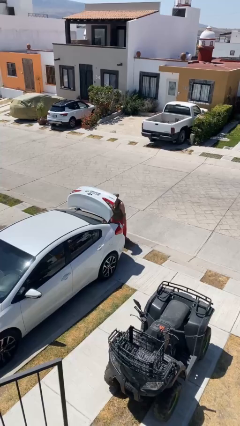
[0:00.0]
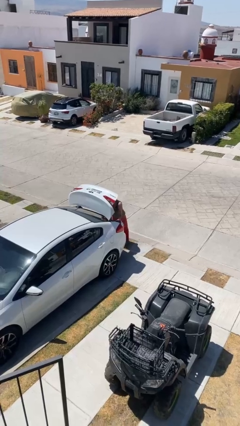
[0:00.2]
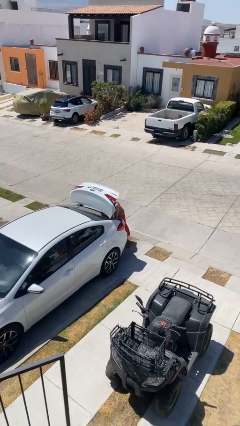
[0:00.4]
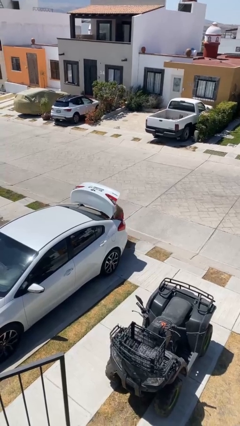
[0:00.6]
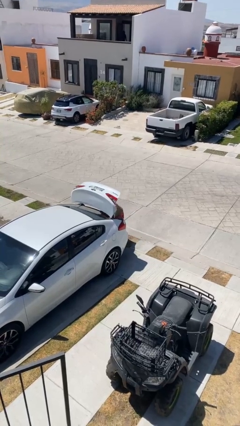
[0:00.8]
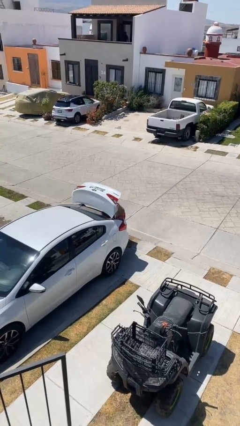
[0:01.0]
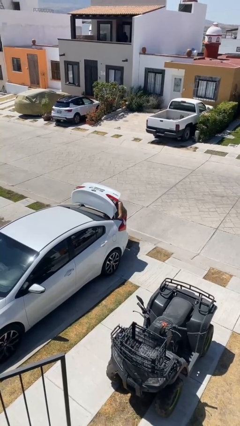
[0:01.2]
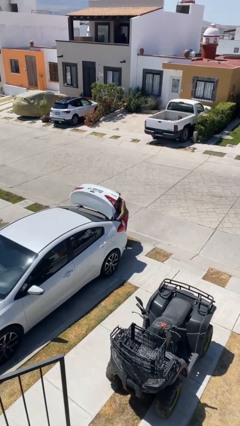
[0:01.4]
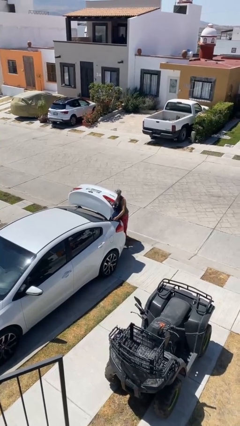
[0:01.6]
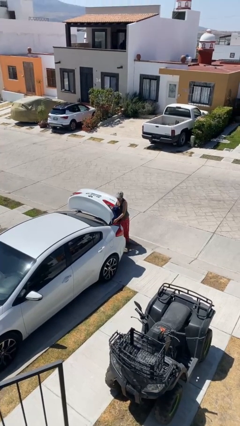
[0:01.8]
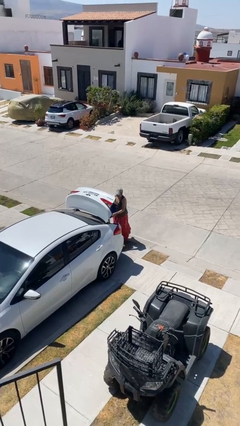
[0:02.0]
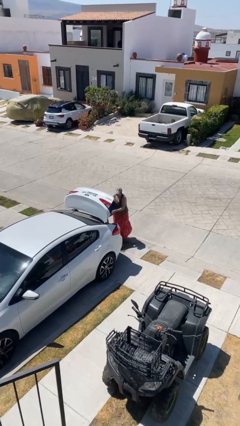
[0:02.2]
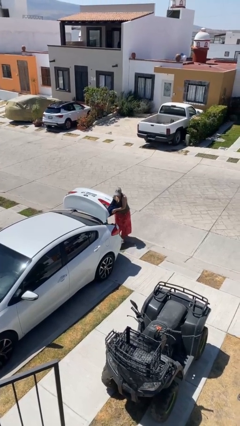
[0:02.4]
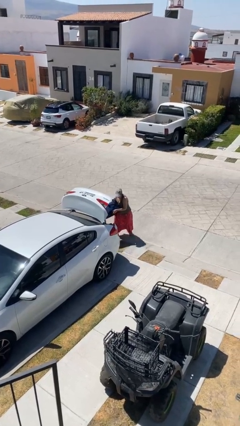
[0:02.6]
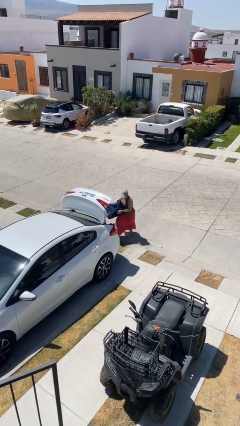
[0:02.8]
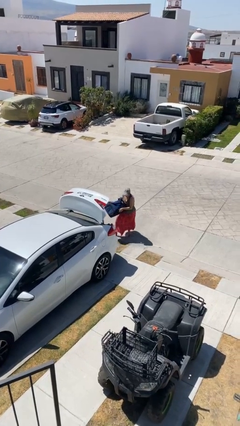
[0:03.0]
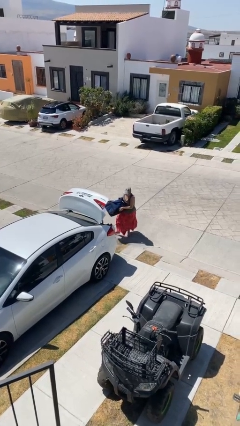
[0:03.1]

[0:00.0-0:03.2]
person unloads car

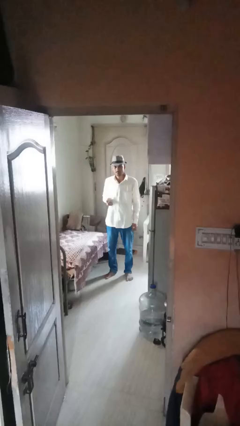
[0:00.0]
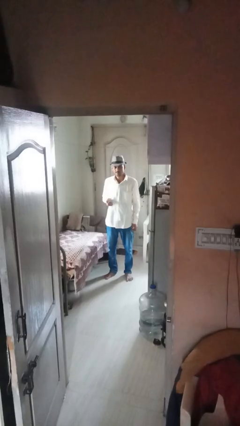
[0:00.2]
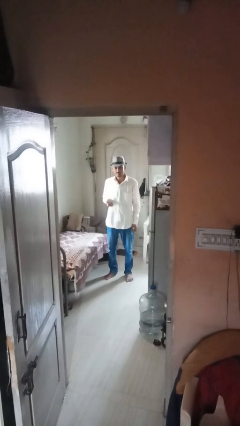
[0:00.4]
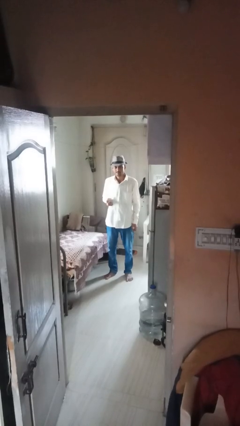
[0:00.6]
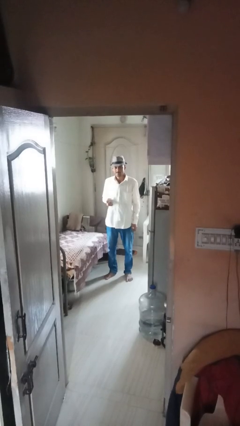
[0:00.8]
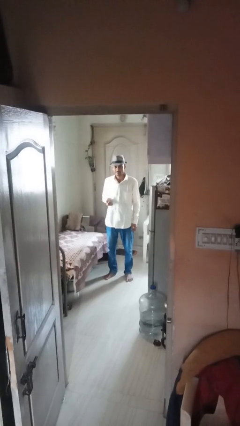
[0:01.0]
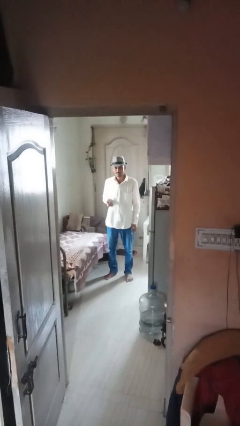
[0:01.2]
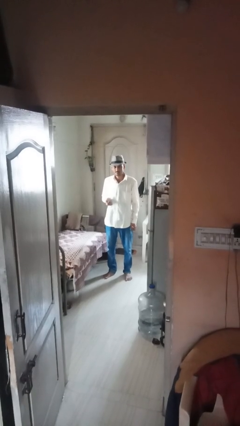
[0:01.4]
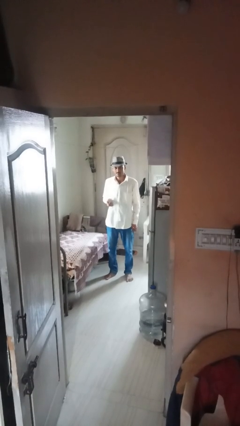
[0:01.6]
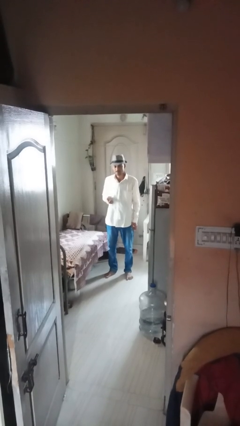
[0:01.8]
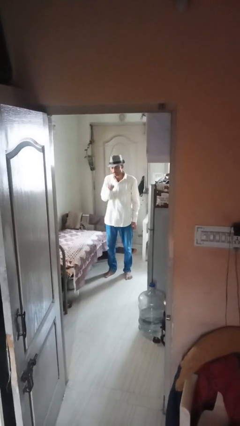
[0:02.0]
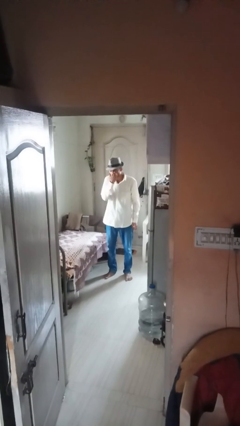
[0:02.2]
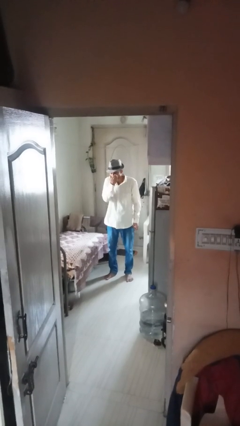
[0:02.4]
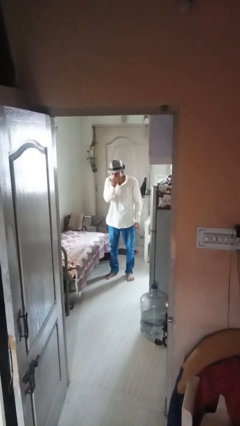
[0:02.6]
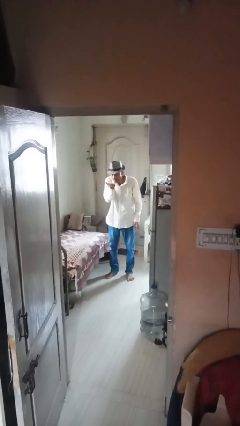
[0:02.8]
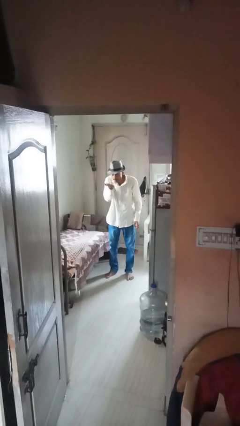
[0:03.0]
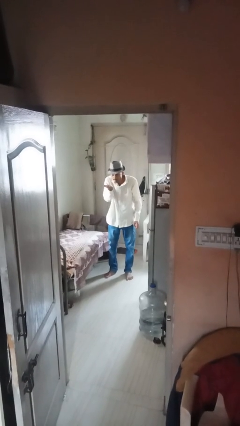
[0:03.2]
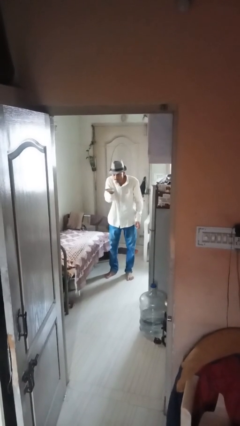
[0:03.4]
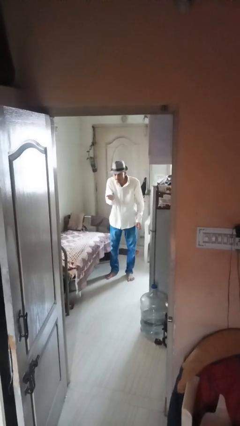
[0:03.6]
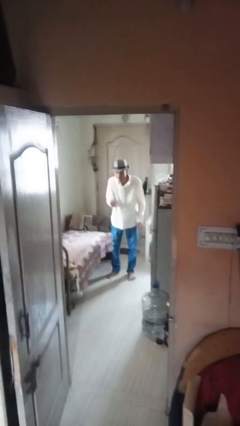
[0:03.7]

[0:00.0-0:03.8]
person gestures blow kiss

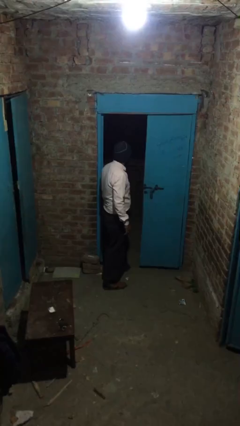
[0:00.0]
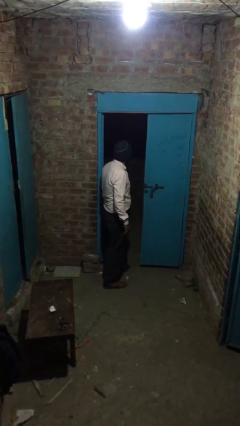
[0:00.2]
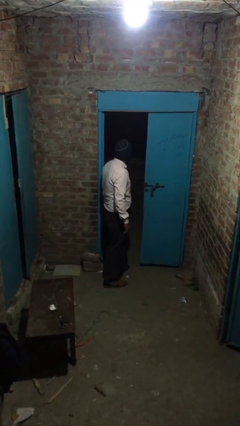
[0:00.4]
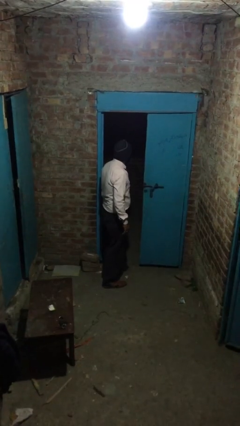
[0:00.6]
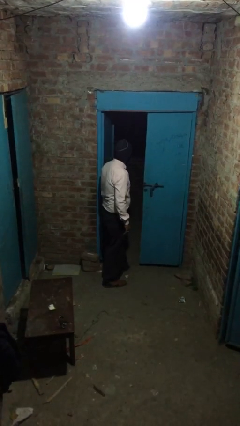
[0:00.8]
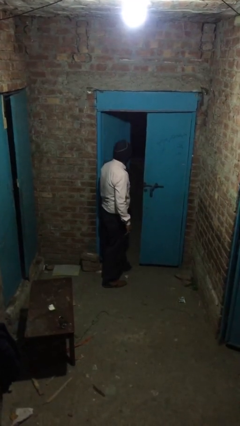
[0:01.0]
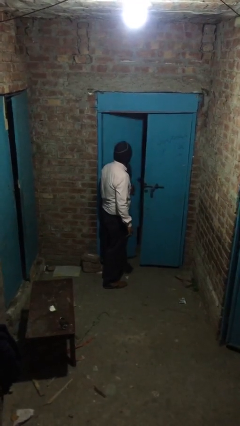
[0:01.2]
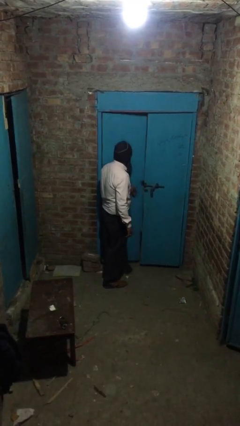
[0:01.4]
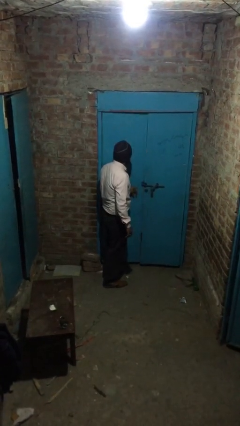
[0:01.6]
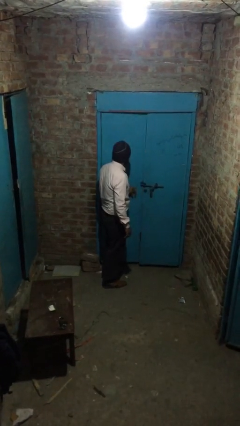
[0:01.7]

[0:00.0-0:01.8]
person closes facility door

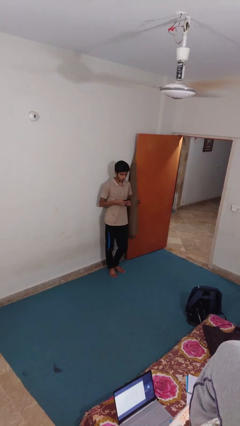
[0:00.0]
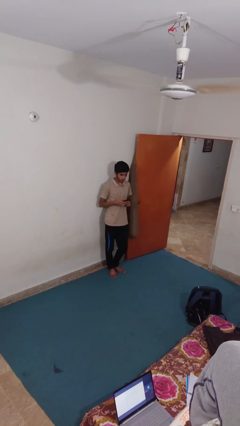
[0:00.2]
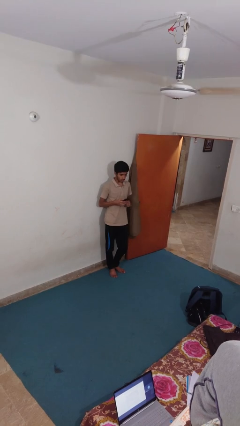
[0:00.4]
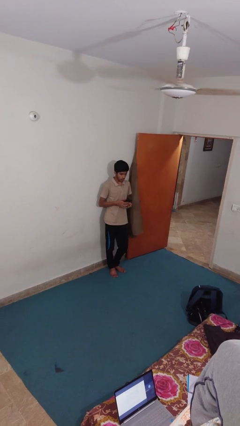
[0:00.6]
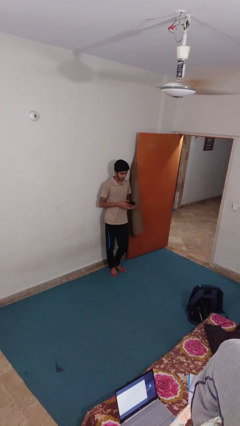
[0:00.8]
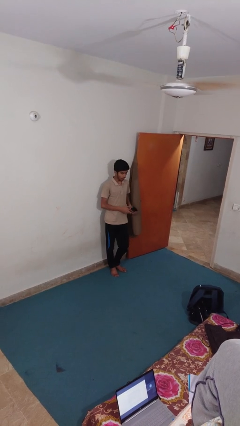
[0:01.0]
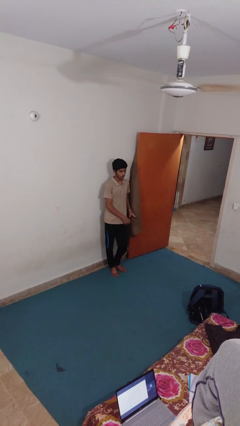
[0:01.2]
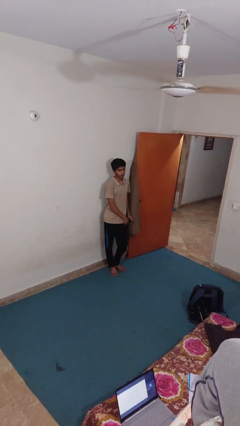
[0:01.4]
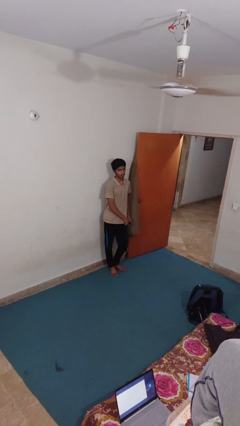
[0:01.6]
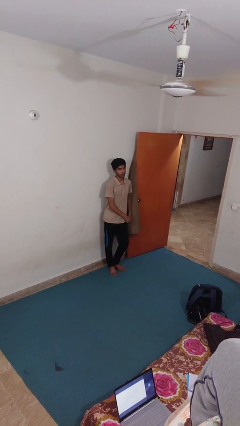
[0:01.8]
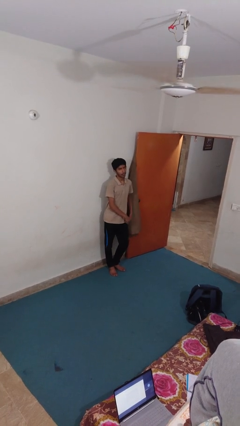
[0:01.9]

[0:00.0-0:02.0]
person puts phone into pocket

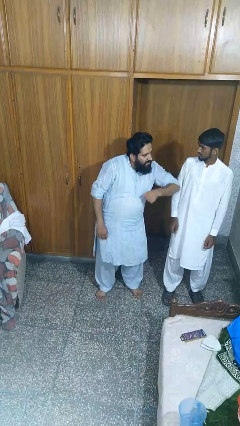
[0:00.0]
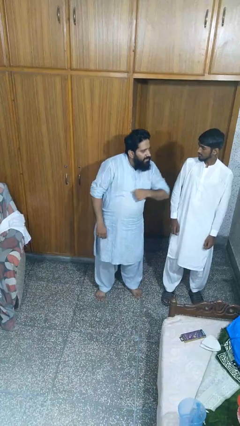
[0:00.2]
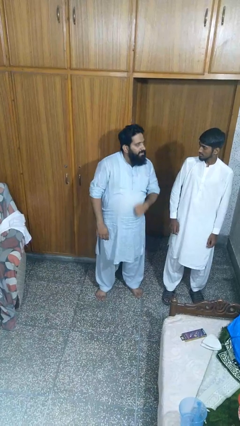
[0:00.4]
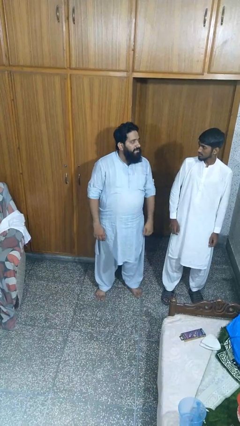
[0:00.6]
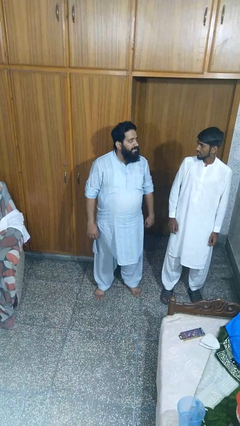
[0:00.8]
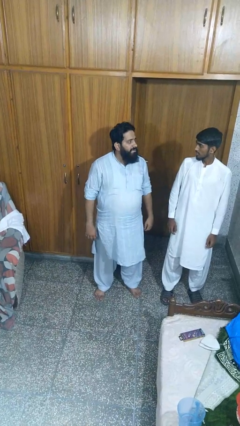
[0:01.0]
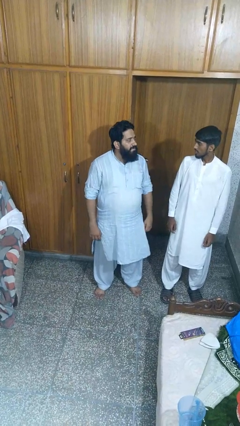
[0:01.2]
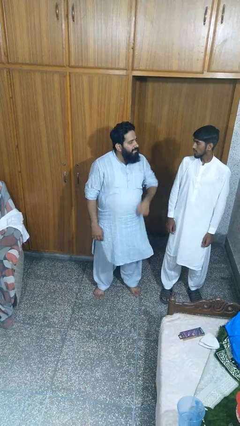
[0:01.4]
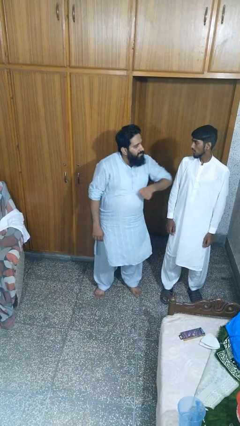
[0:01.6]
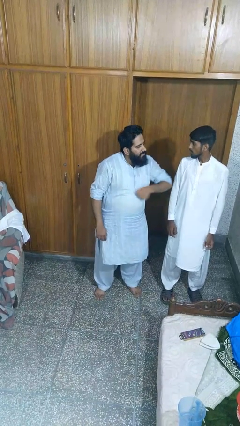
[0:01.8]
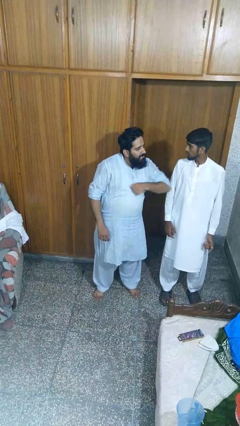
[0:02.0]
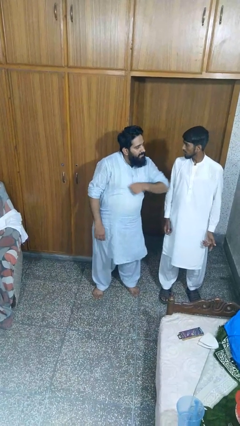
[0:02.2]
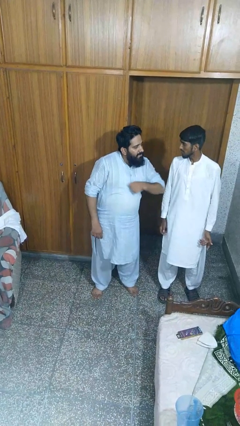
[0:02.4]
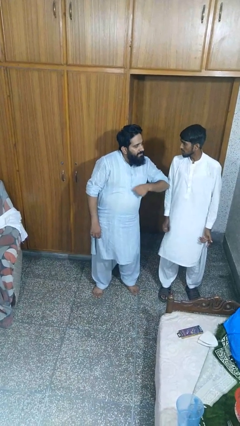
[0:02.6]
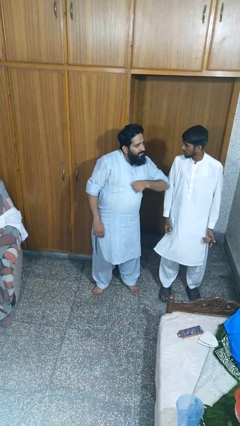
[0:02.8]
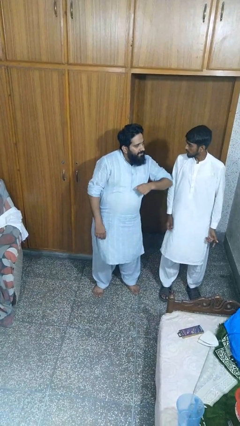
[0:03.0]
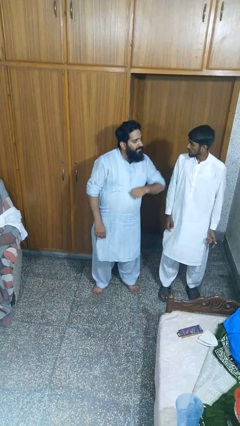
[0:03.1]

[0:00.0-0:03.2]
person nudges person with elbow

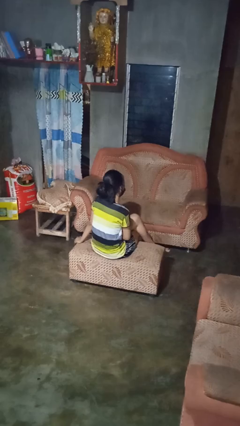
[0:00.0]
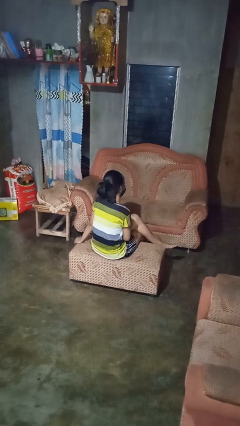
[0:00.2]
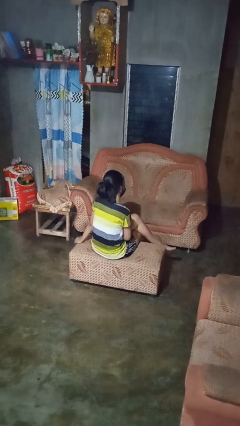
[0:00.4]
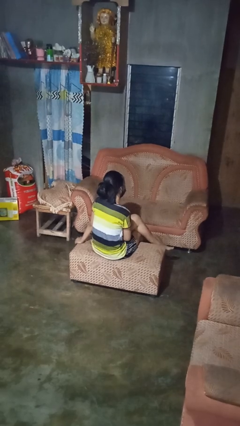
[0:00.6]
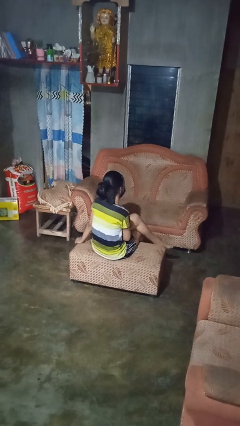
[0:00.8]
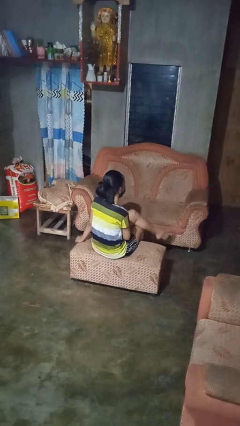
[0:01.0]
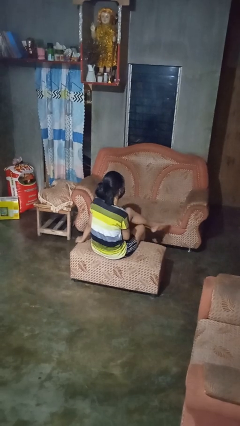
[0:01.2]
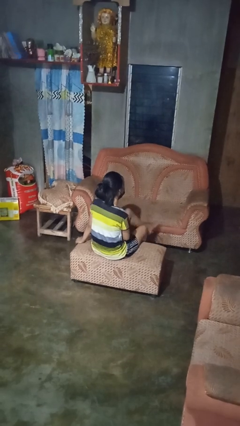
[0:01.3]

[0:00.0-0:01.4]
person crosses legs

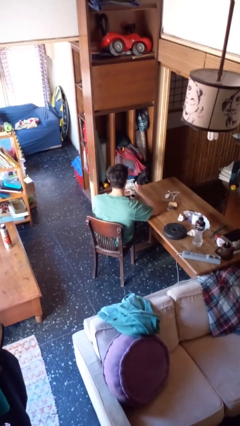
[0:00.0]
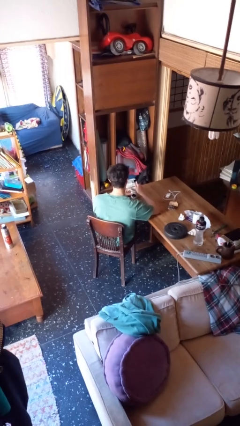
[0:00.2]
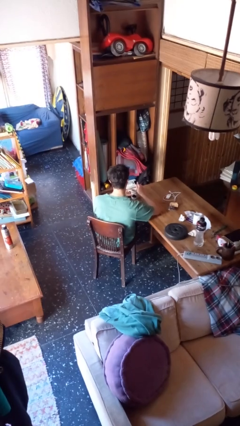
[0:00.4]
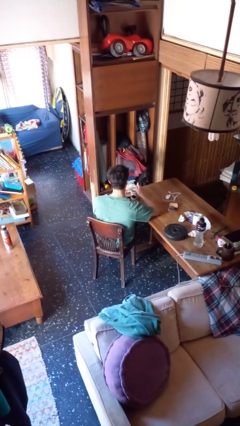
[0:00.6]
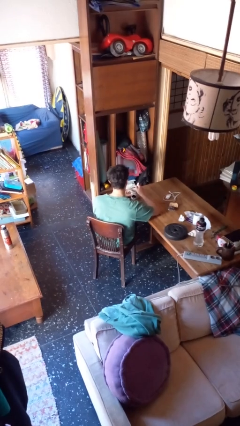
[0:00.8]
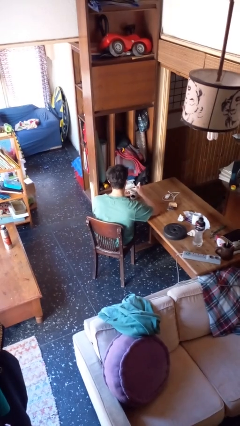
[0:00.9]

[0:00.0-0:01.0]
person stirs mug
